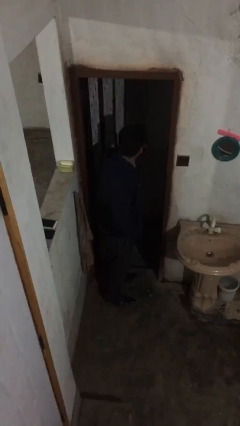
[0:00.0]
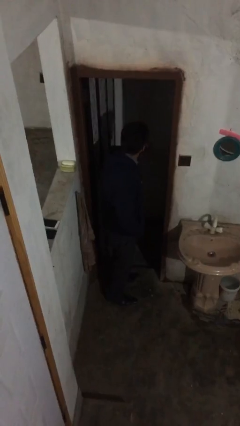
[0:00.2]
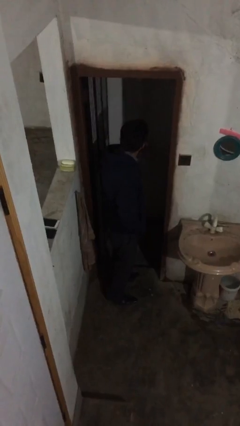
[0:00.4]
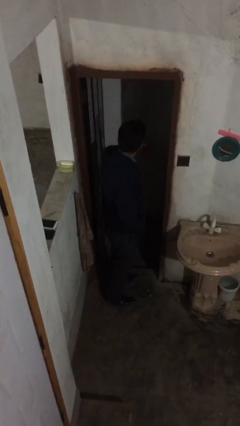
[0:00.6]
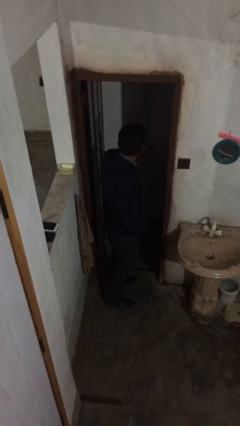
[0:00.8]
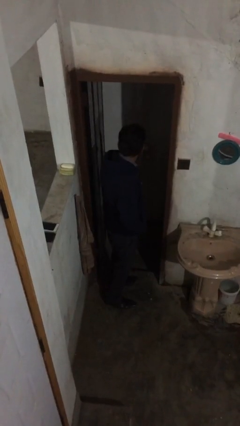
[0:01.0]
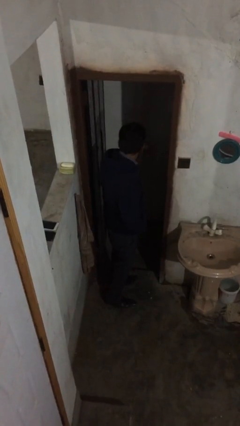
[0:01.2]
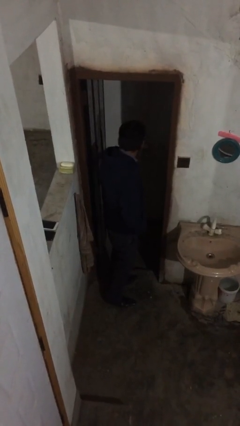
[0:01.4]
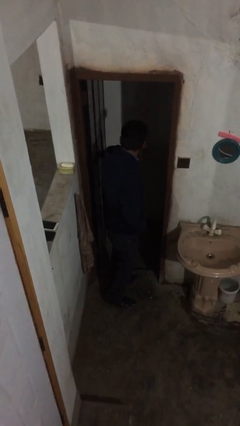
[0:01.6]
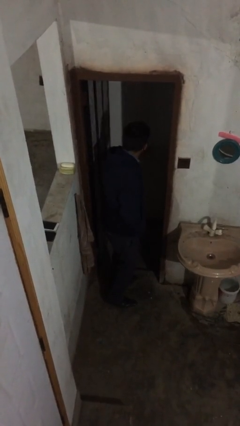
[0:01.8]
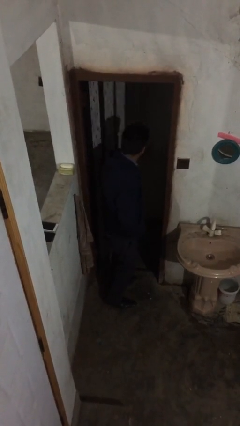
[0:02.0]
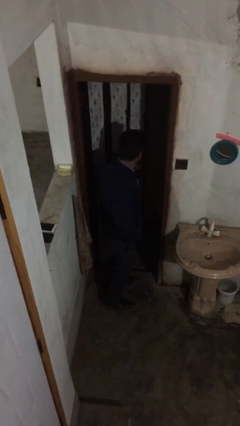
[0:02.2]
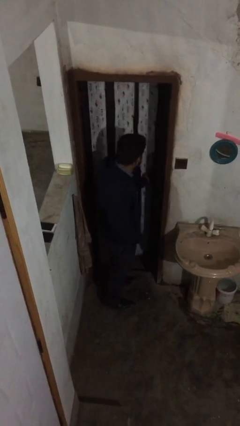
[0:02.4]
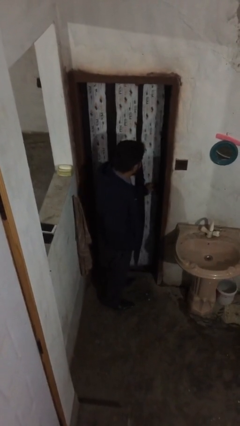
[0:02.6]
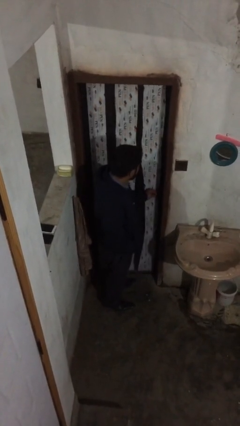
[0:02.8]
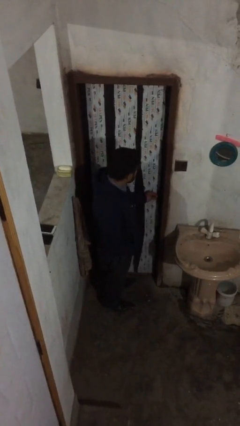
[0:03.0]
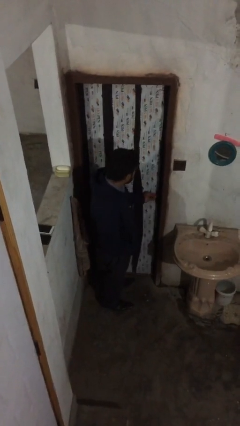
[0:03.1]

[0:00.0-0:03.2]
person closes facility door

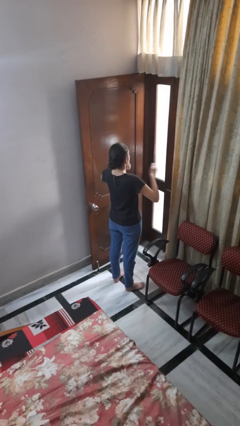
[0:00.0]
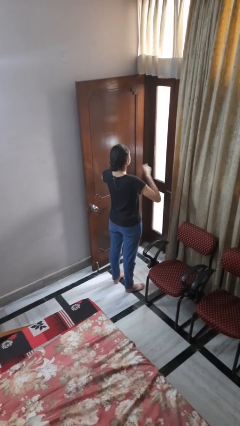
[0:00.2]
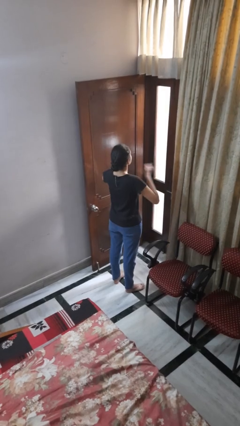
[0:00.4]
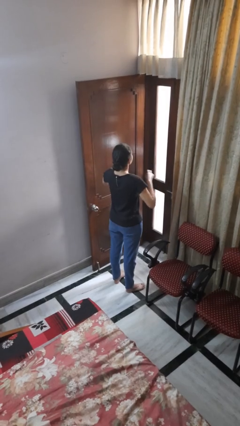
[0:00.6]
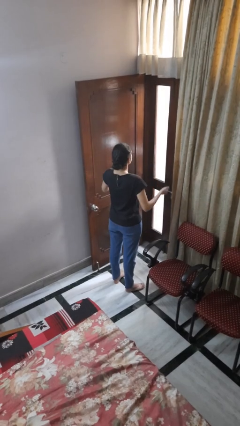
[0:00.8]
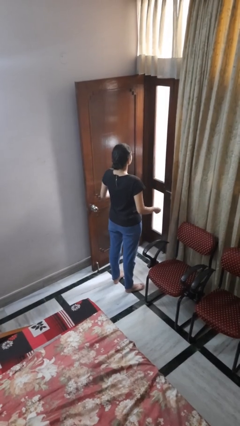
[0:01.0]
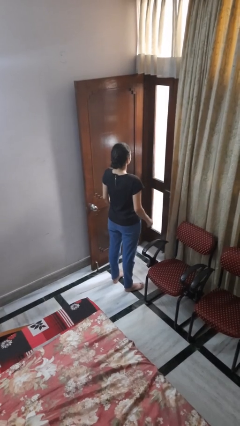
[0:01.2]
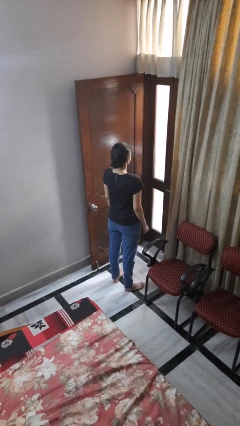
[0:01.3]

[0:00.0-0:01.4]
person drums on chest

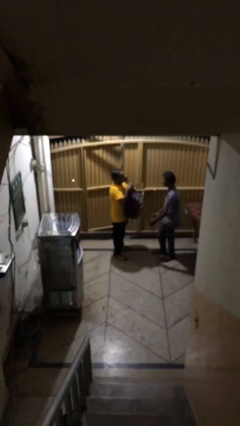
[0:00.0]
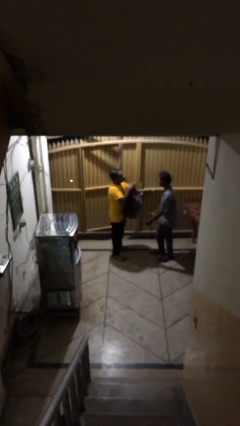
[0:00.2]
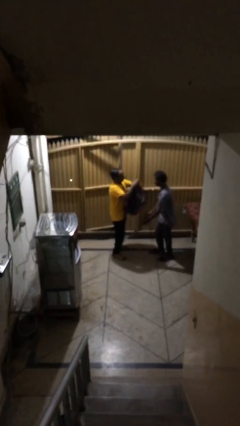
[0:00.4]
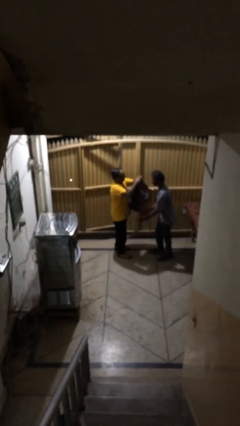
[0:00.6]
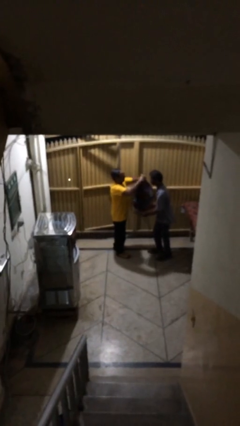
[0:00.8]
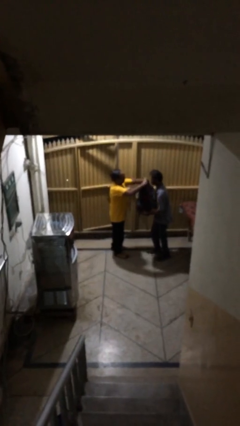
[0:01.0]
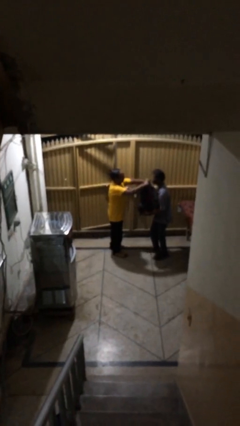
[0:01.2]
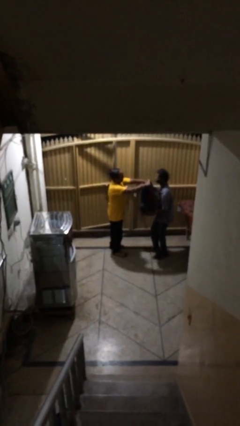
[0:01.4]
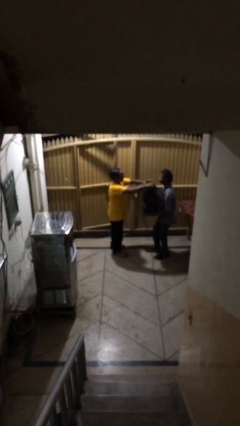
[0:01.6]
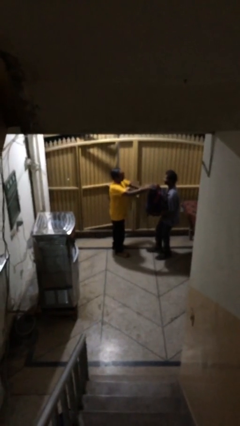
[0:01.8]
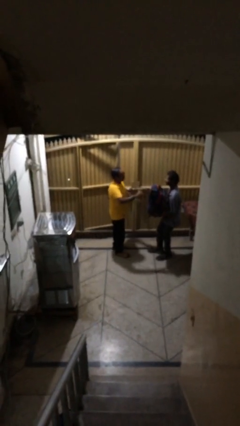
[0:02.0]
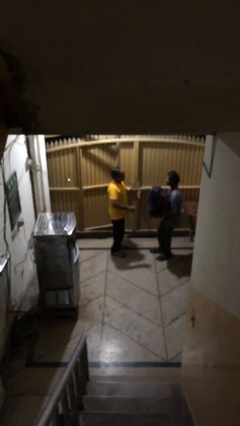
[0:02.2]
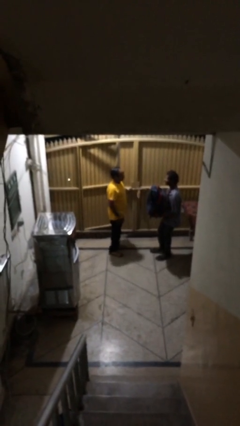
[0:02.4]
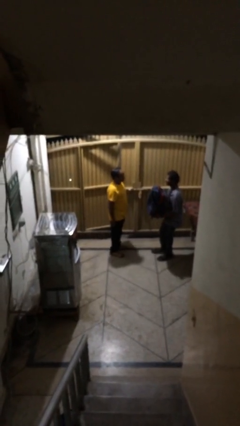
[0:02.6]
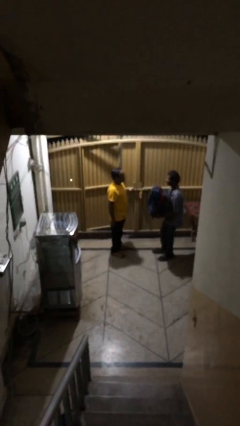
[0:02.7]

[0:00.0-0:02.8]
person transfers object to person

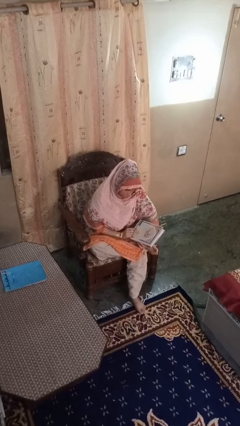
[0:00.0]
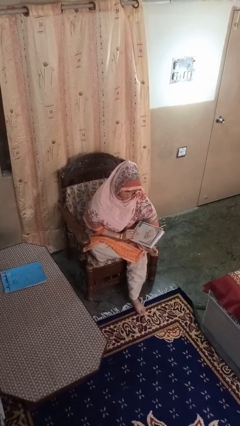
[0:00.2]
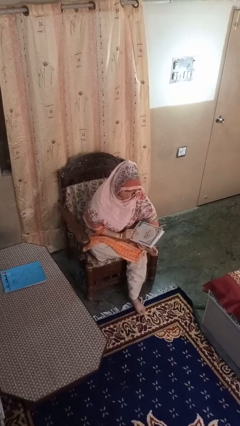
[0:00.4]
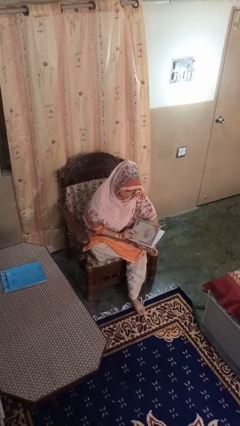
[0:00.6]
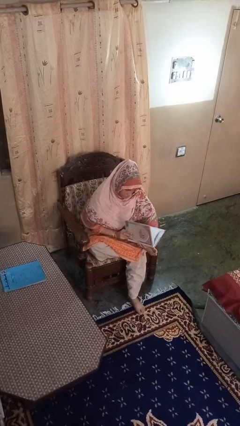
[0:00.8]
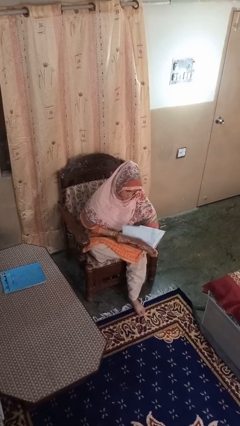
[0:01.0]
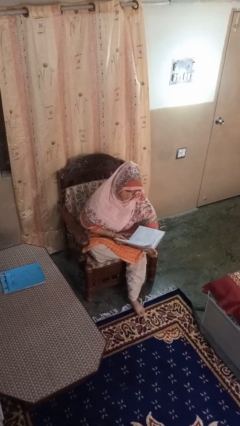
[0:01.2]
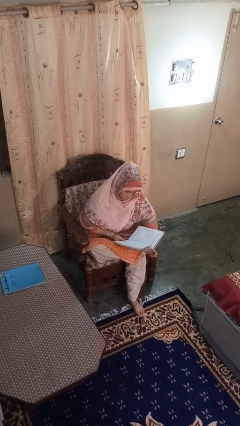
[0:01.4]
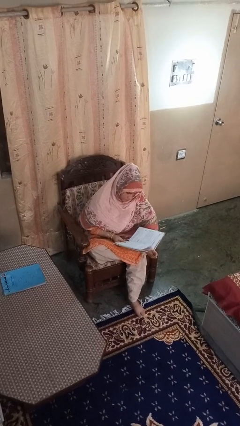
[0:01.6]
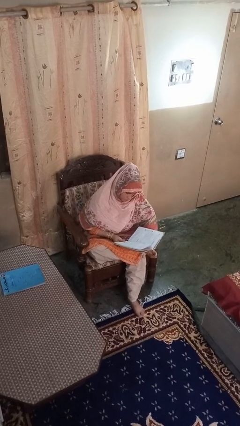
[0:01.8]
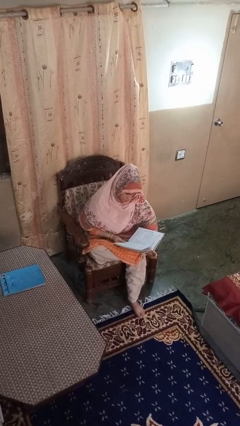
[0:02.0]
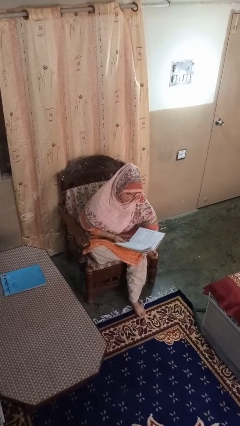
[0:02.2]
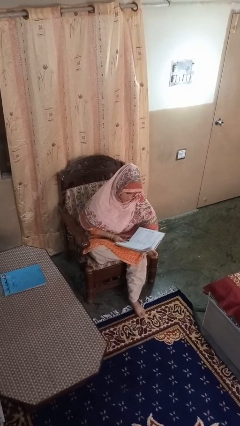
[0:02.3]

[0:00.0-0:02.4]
person reads book

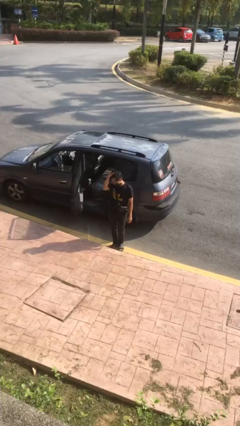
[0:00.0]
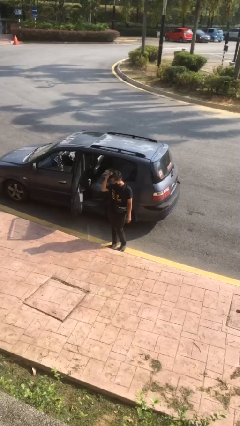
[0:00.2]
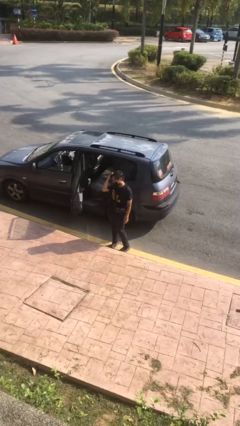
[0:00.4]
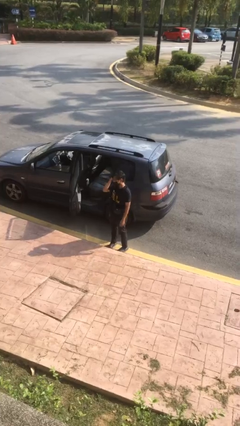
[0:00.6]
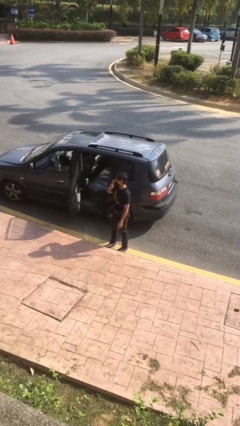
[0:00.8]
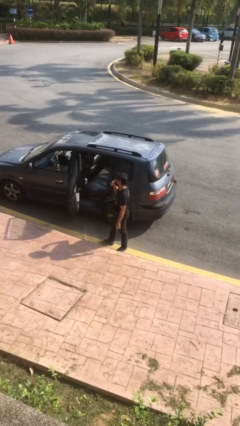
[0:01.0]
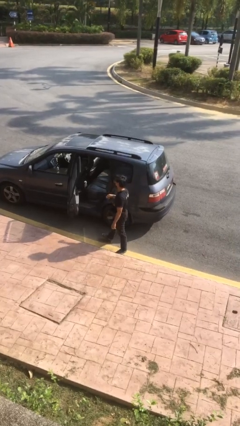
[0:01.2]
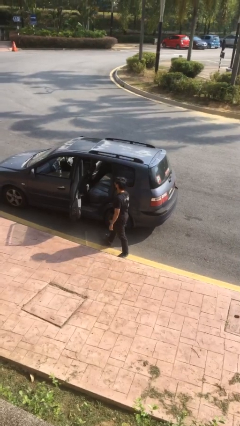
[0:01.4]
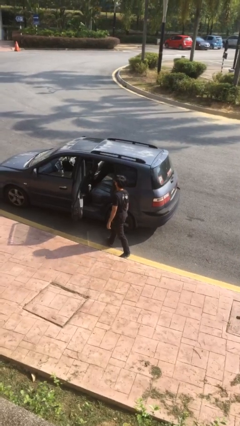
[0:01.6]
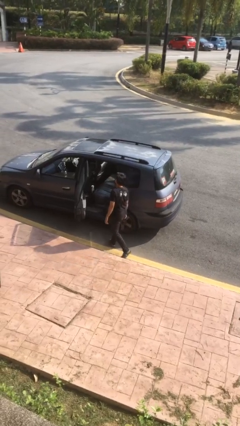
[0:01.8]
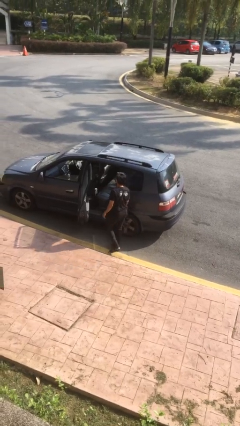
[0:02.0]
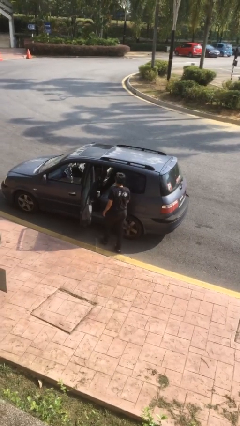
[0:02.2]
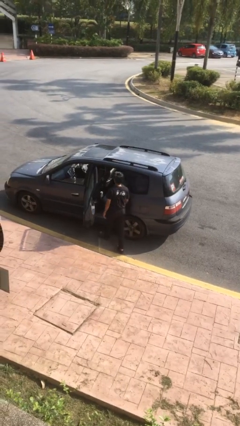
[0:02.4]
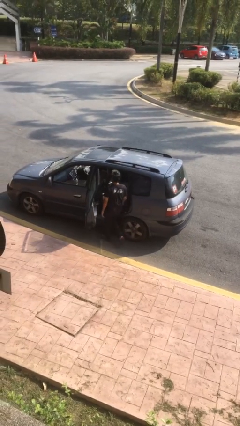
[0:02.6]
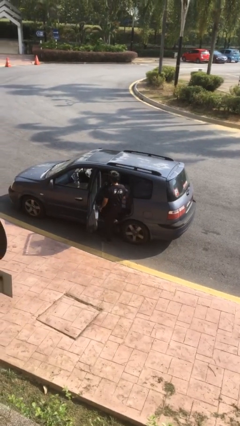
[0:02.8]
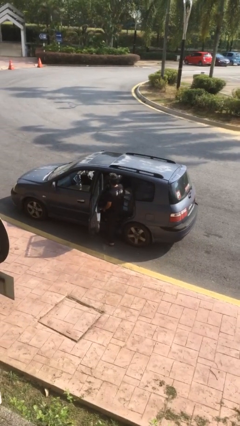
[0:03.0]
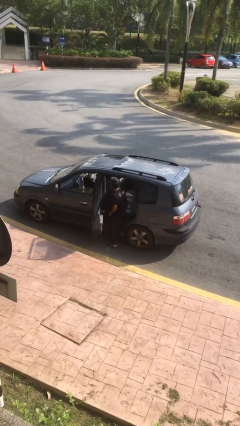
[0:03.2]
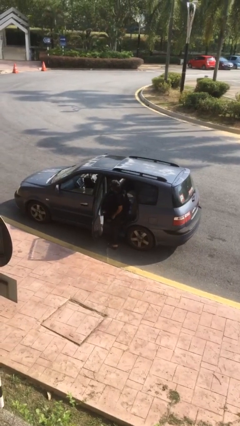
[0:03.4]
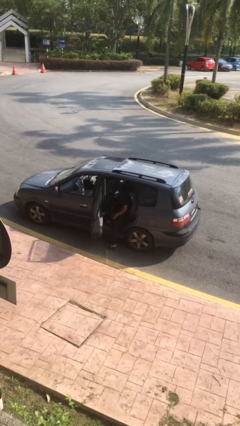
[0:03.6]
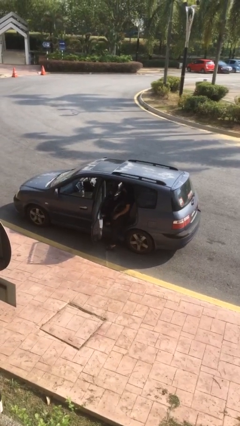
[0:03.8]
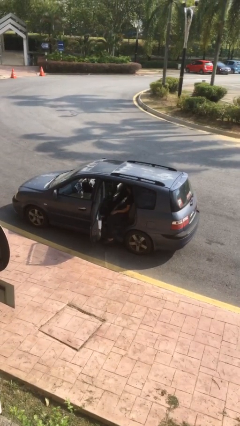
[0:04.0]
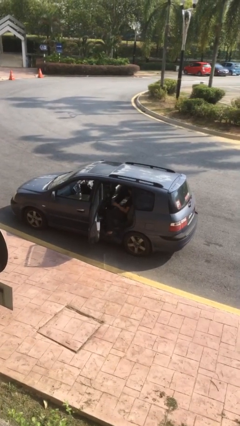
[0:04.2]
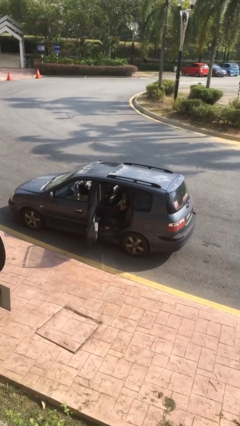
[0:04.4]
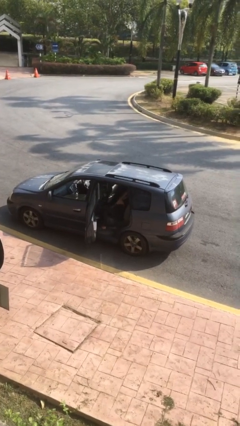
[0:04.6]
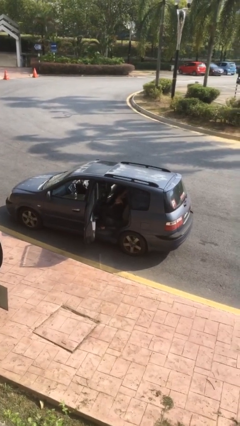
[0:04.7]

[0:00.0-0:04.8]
person enters car

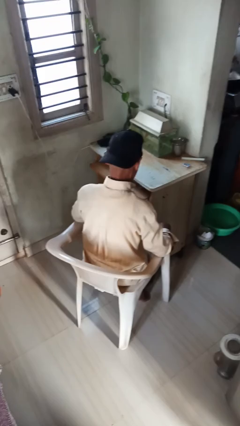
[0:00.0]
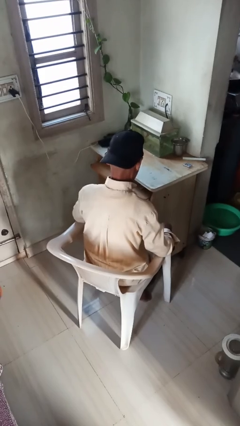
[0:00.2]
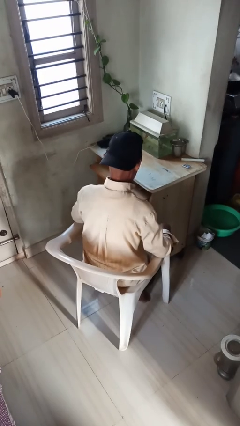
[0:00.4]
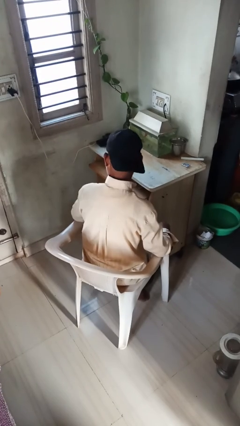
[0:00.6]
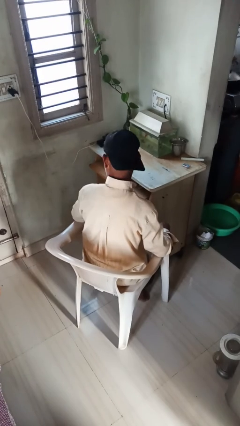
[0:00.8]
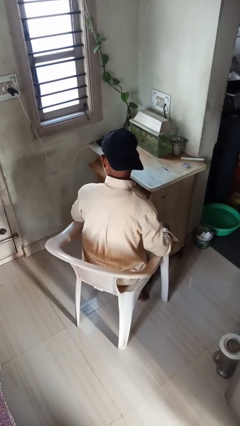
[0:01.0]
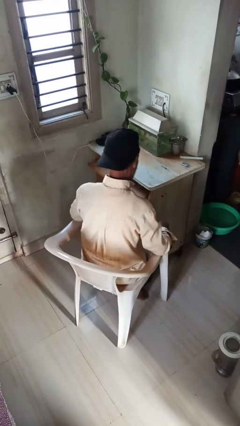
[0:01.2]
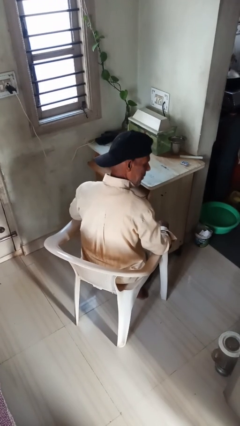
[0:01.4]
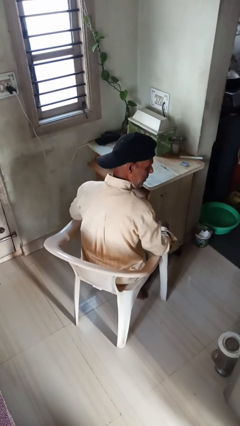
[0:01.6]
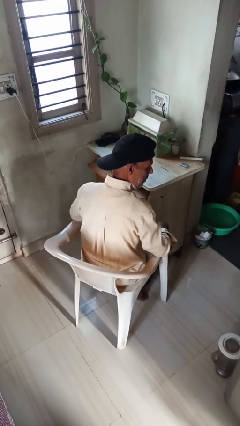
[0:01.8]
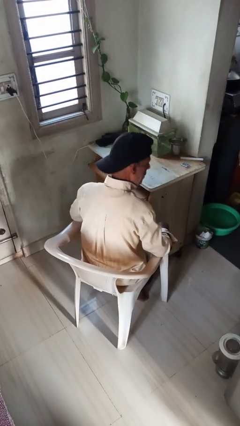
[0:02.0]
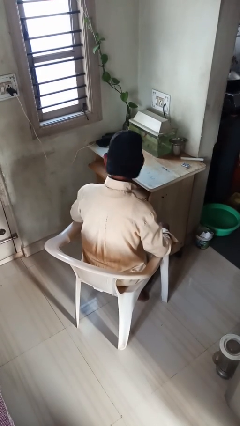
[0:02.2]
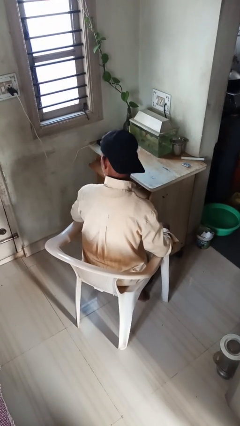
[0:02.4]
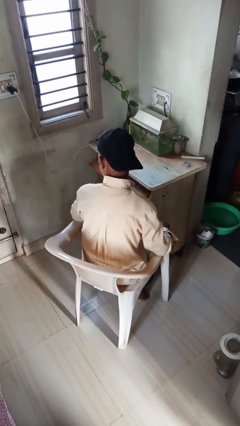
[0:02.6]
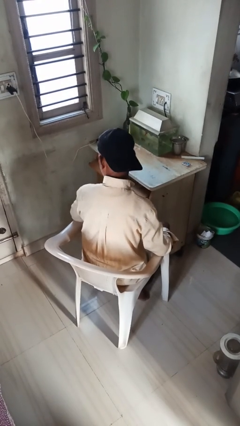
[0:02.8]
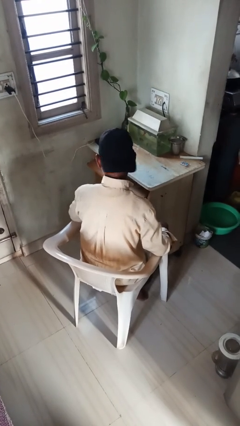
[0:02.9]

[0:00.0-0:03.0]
person shakes head

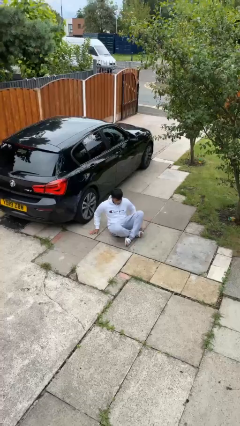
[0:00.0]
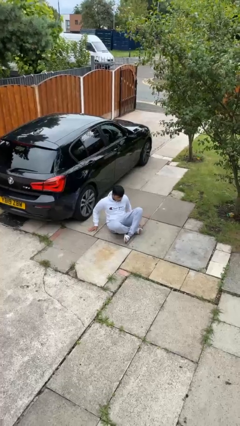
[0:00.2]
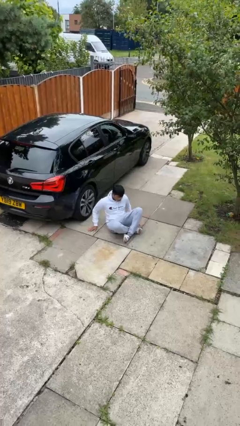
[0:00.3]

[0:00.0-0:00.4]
person stands up from floor
